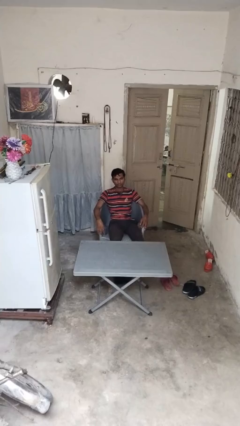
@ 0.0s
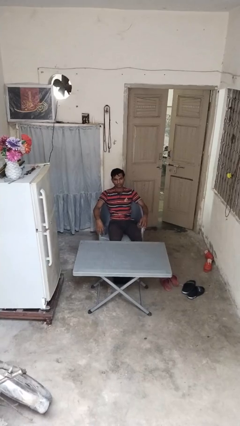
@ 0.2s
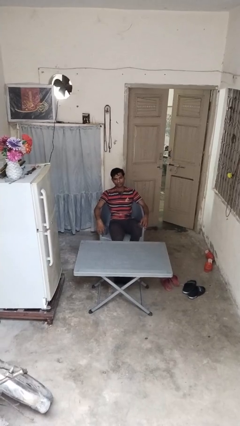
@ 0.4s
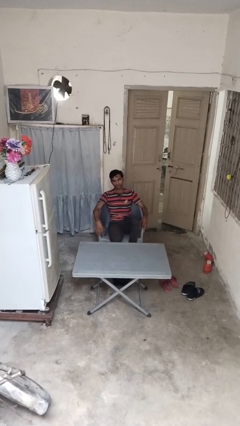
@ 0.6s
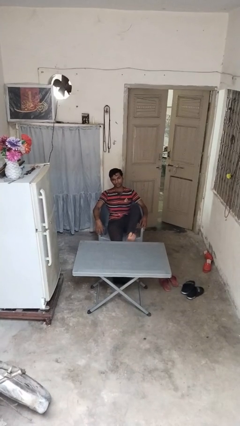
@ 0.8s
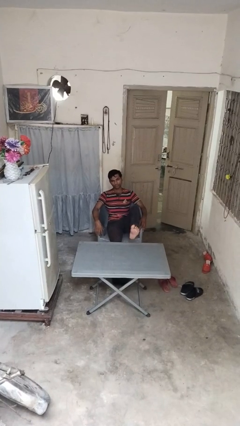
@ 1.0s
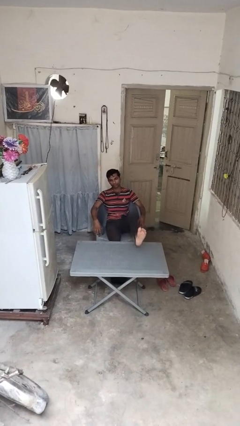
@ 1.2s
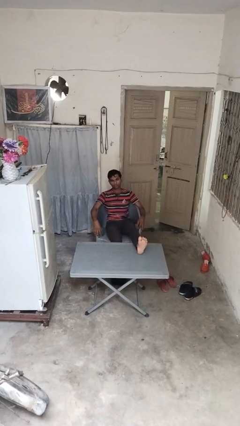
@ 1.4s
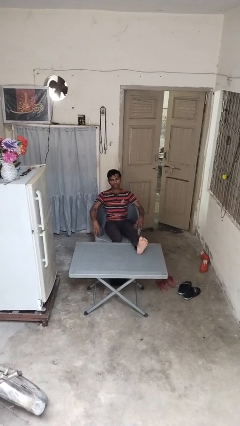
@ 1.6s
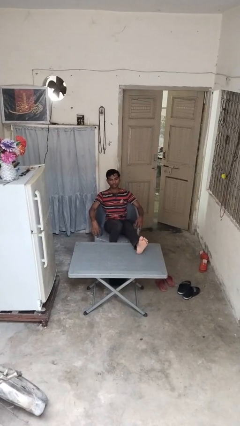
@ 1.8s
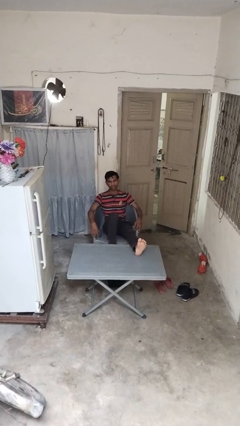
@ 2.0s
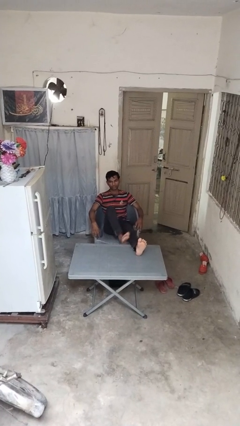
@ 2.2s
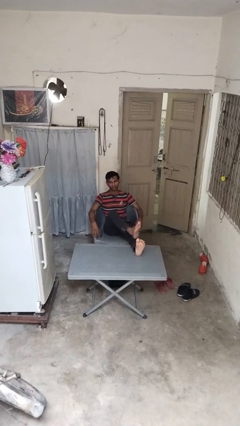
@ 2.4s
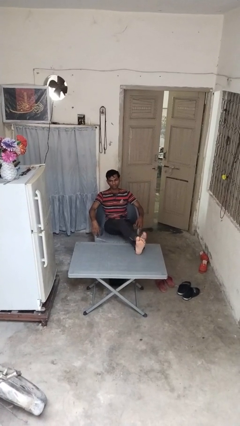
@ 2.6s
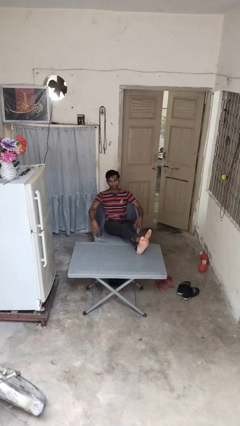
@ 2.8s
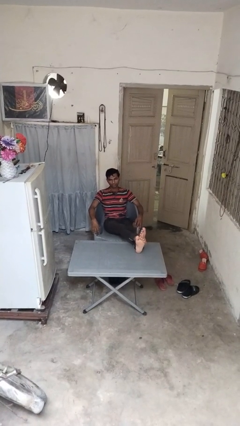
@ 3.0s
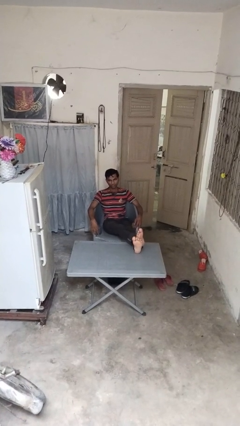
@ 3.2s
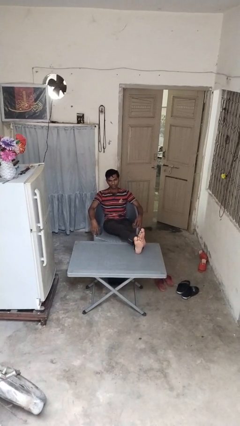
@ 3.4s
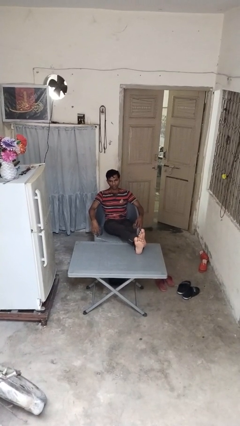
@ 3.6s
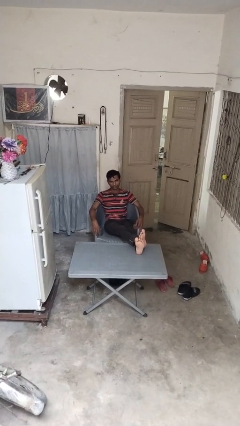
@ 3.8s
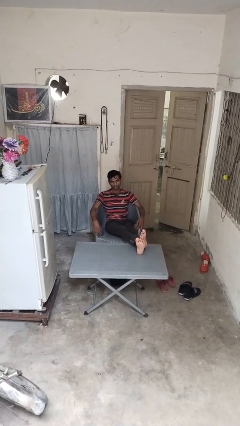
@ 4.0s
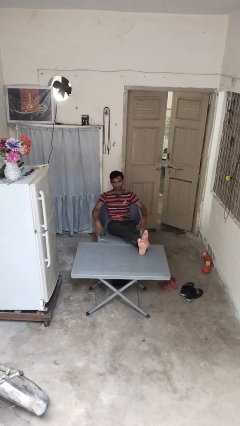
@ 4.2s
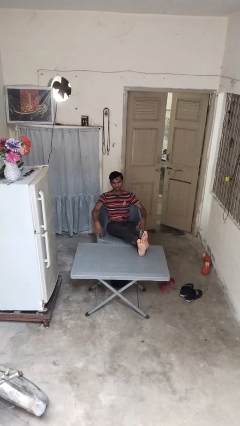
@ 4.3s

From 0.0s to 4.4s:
person puts feet up

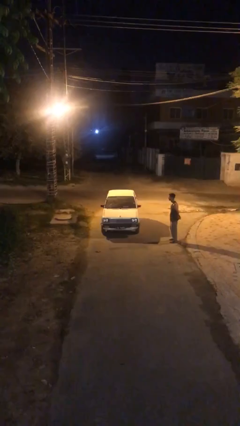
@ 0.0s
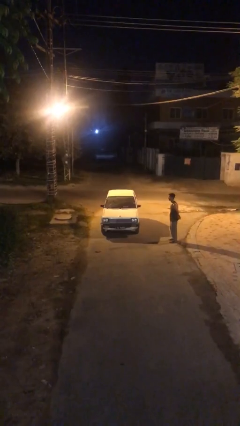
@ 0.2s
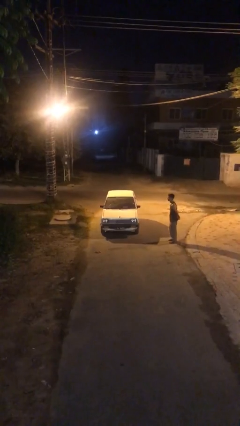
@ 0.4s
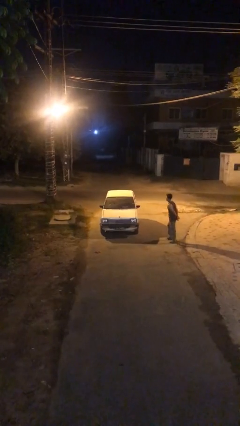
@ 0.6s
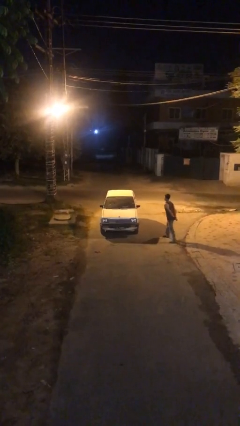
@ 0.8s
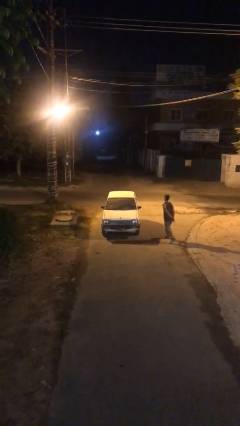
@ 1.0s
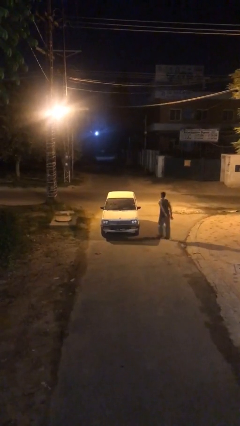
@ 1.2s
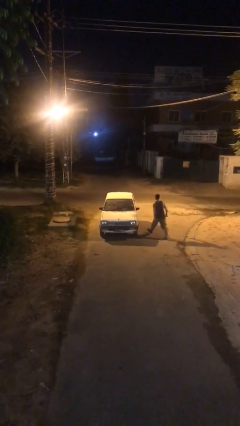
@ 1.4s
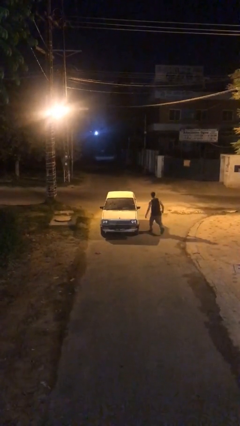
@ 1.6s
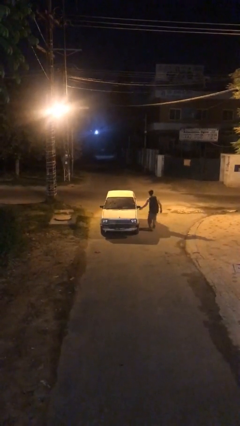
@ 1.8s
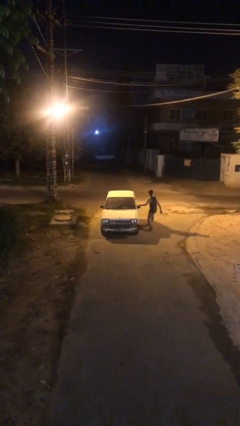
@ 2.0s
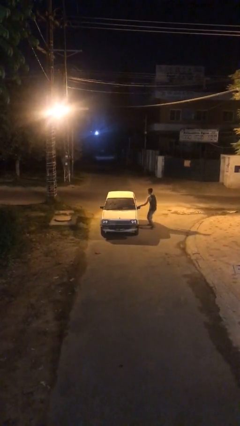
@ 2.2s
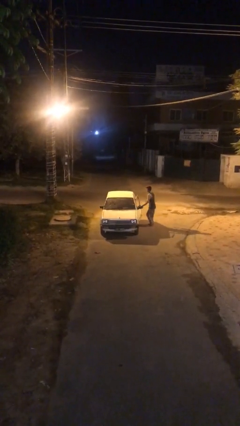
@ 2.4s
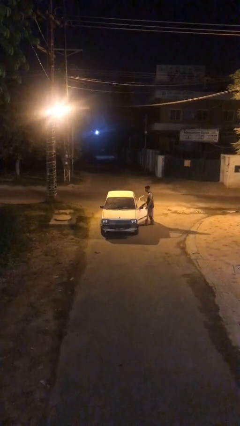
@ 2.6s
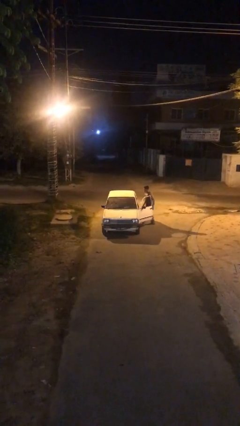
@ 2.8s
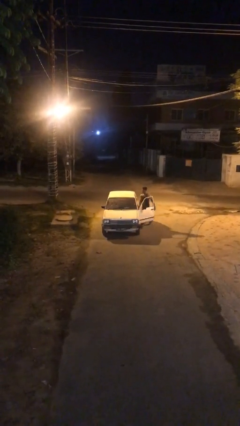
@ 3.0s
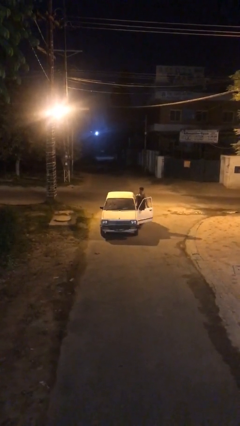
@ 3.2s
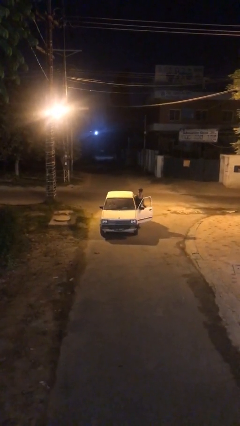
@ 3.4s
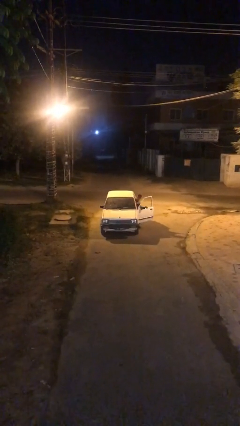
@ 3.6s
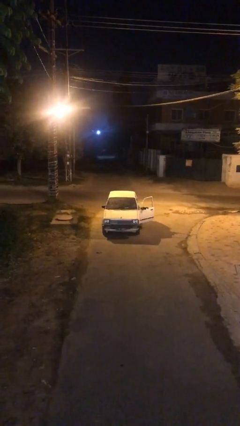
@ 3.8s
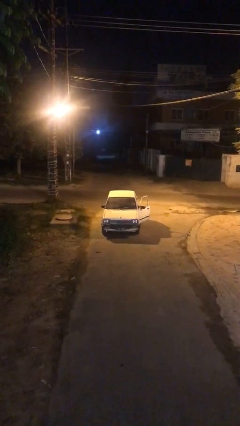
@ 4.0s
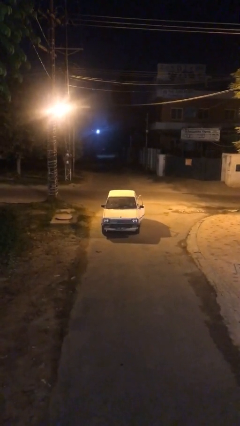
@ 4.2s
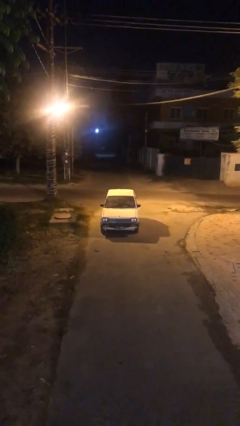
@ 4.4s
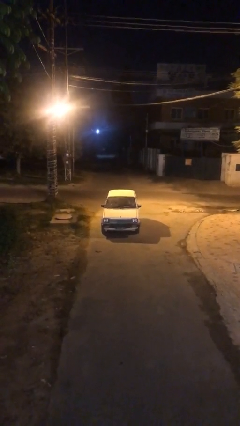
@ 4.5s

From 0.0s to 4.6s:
car picks up person

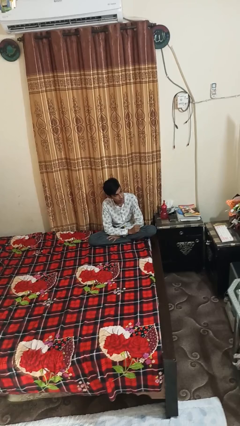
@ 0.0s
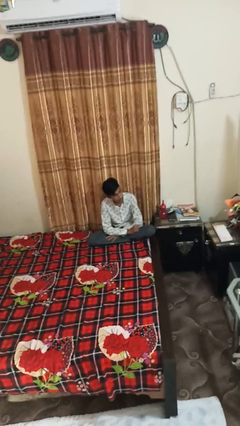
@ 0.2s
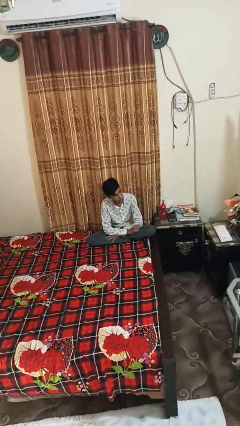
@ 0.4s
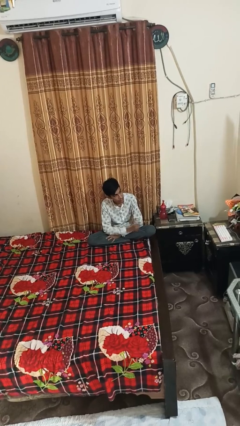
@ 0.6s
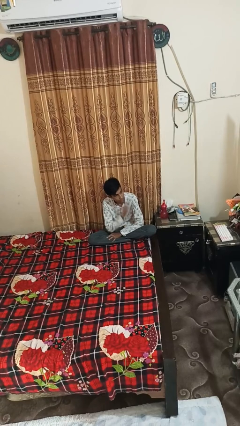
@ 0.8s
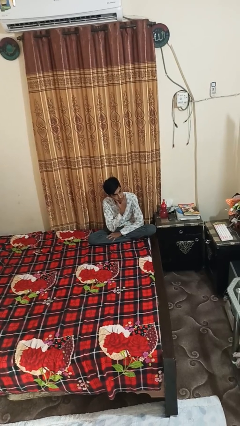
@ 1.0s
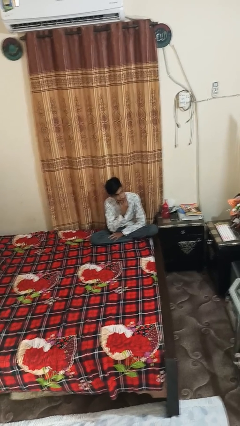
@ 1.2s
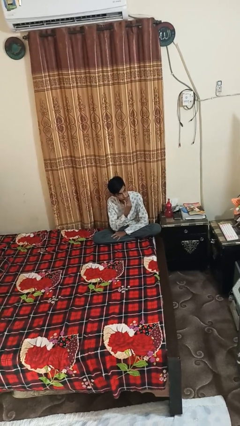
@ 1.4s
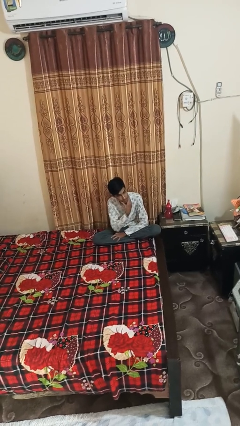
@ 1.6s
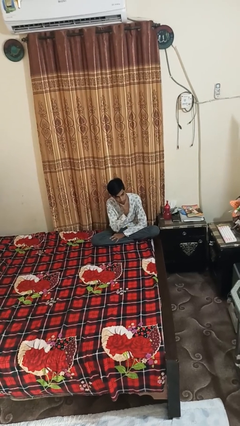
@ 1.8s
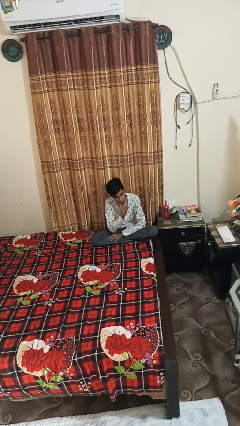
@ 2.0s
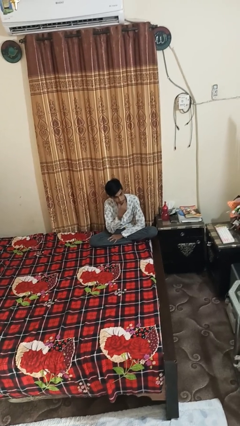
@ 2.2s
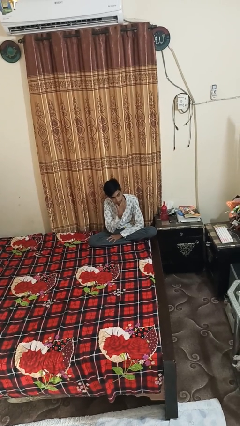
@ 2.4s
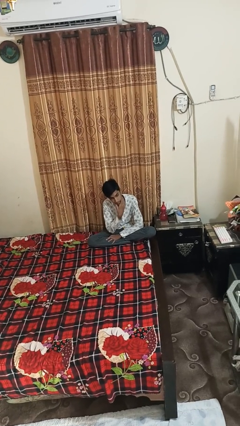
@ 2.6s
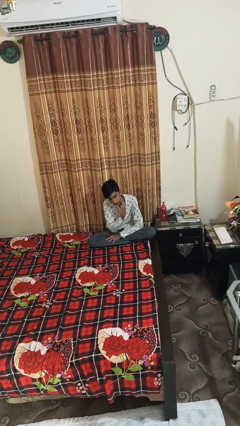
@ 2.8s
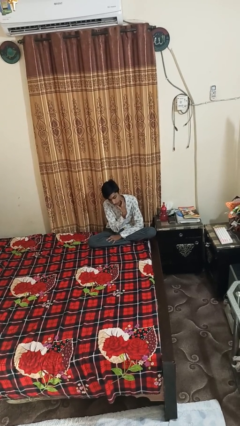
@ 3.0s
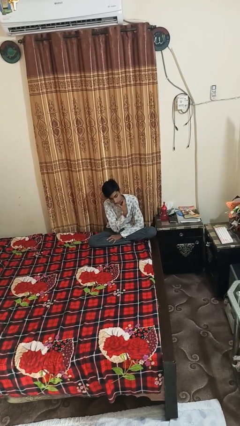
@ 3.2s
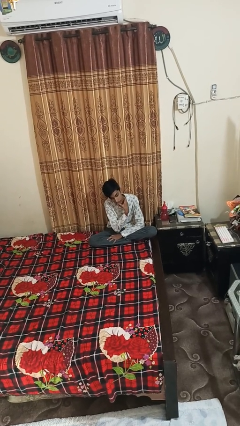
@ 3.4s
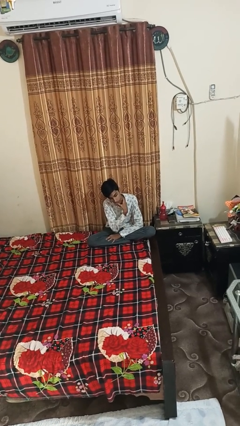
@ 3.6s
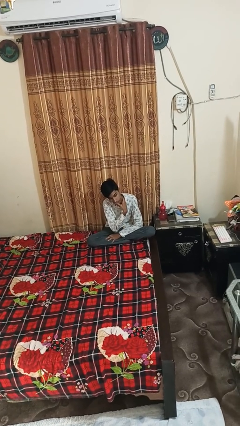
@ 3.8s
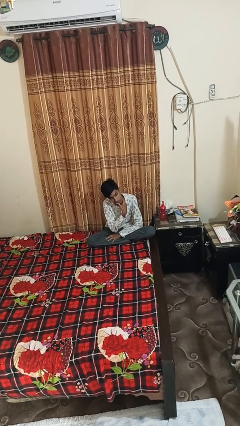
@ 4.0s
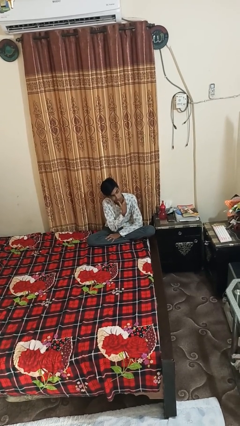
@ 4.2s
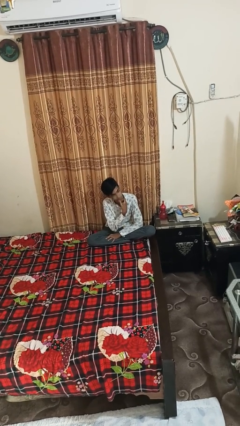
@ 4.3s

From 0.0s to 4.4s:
person strokes chin

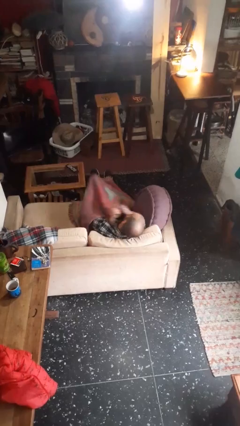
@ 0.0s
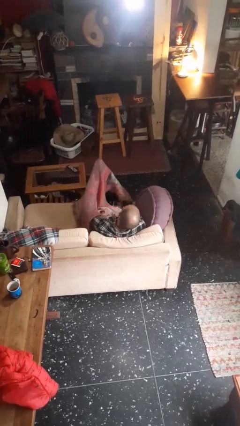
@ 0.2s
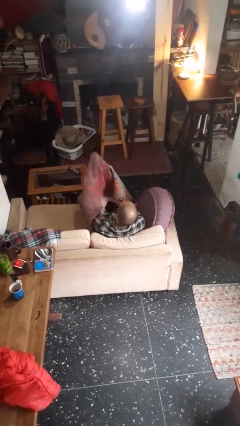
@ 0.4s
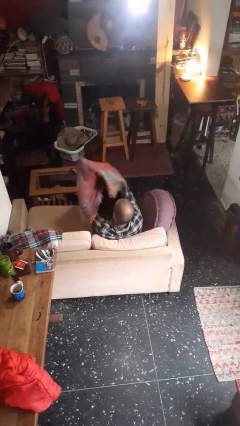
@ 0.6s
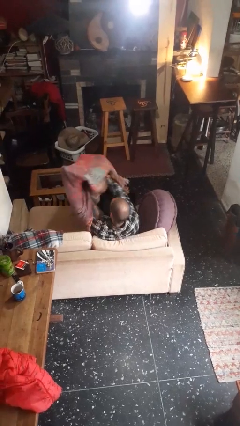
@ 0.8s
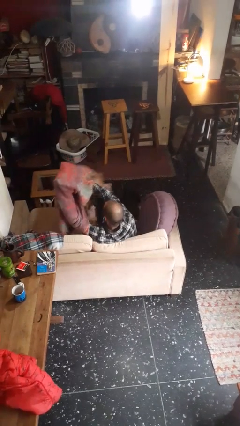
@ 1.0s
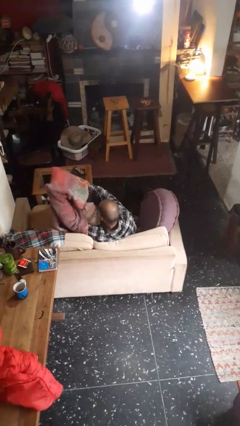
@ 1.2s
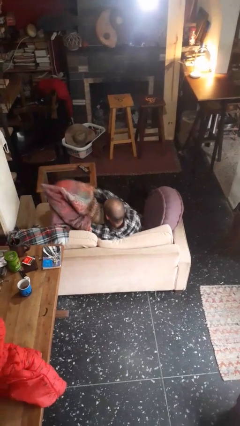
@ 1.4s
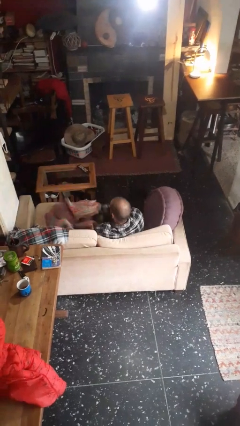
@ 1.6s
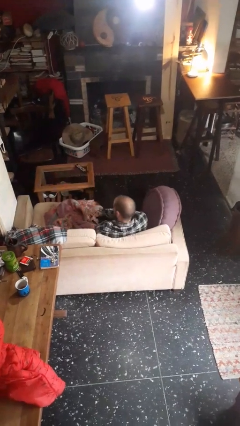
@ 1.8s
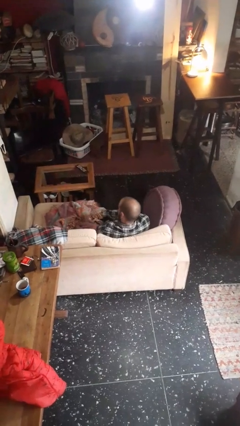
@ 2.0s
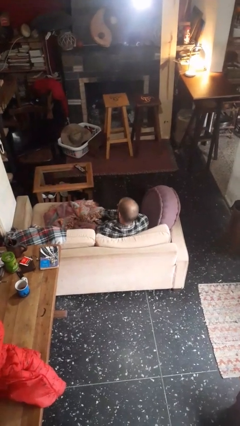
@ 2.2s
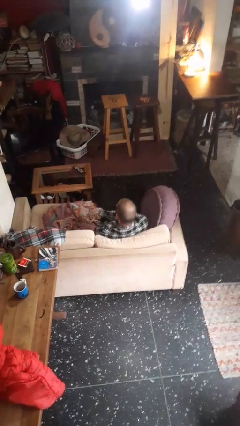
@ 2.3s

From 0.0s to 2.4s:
person uncovers with blanket

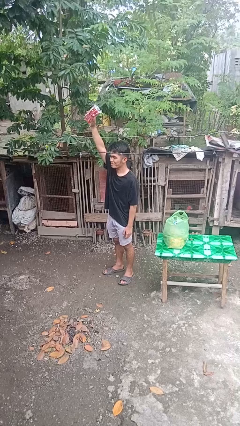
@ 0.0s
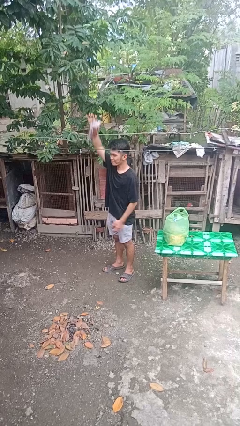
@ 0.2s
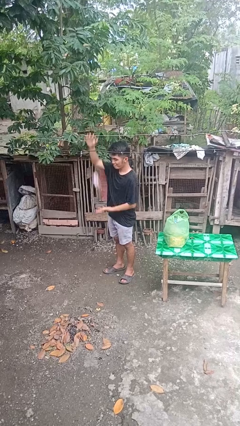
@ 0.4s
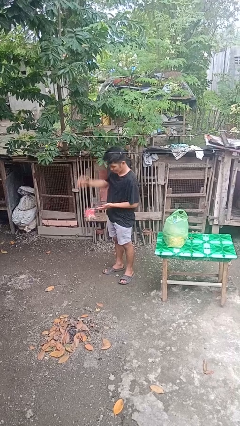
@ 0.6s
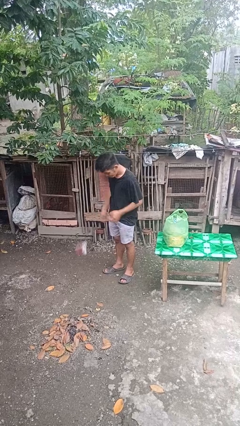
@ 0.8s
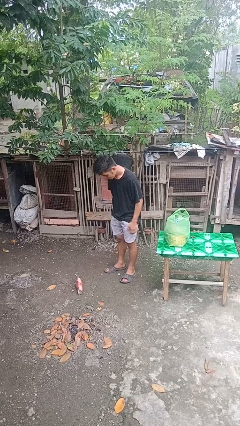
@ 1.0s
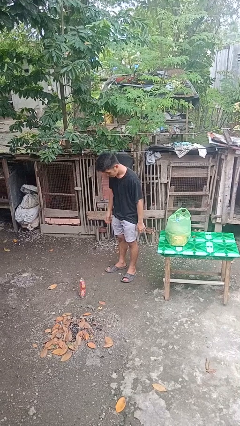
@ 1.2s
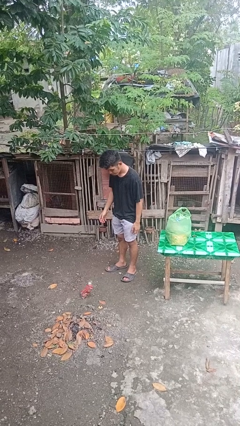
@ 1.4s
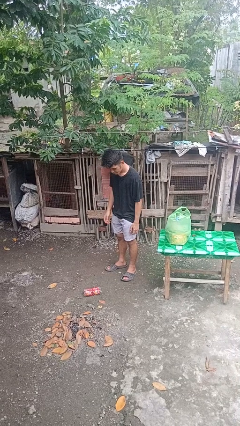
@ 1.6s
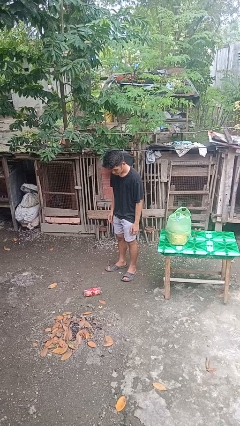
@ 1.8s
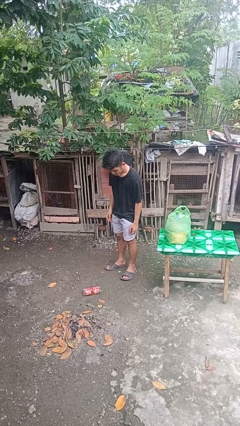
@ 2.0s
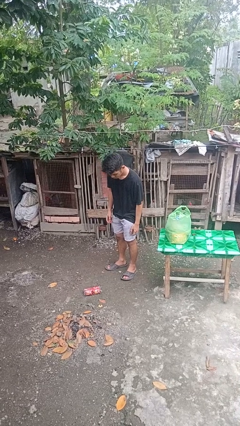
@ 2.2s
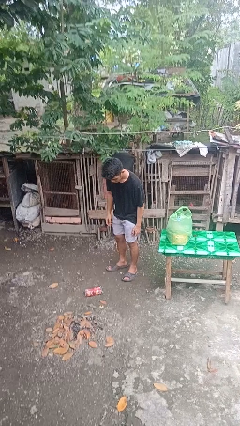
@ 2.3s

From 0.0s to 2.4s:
person drops object
